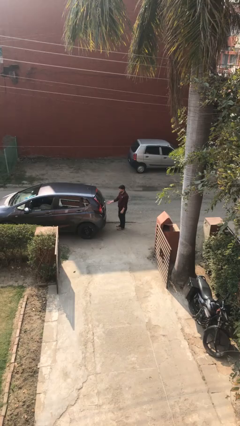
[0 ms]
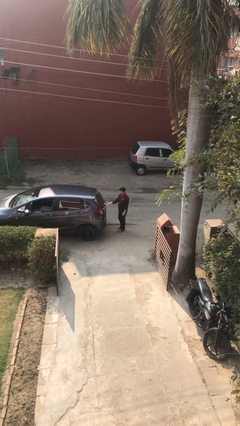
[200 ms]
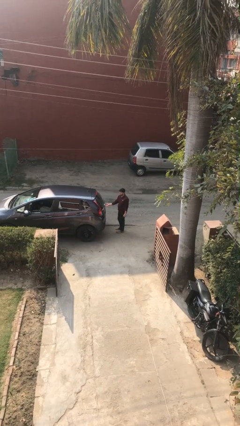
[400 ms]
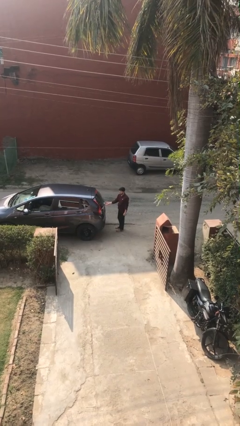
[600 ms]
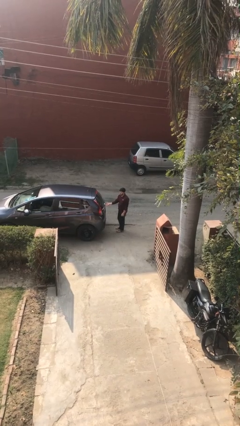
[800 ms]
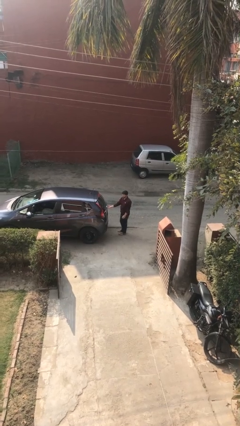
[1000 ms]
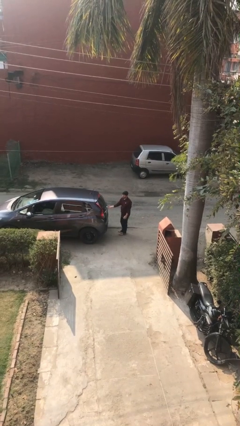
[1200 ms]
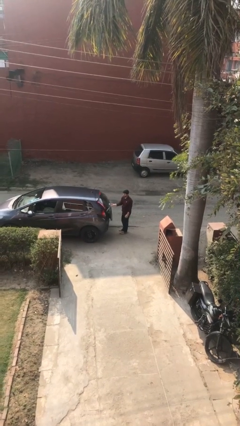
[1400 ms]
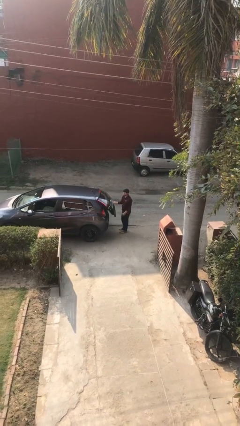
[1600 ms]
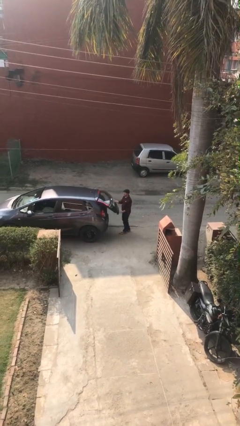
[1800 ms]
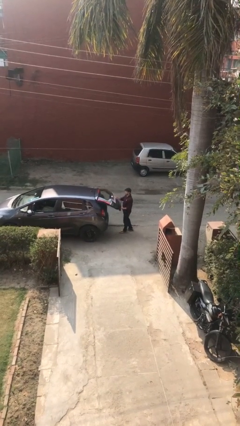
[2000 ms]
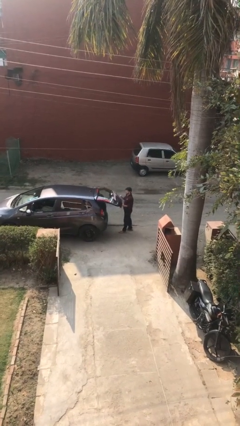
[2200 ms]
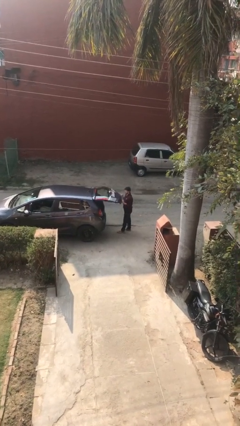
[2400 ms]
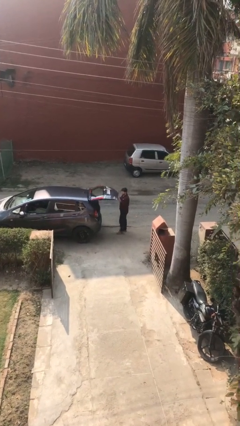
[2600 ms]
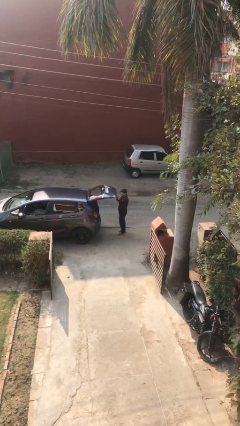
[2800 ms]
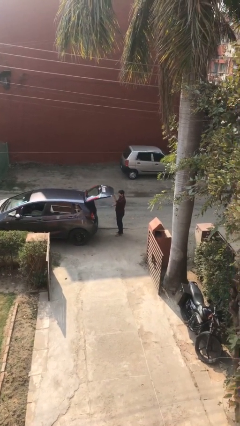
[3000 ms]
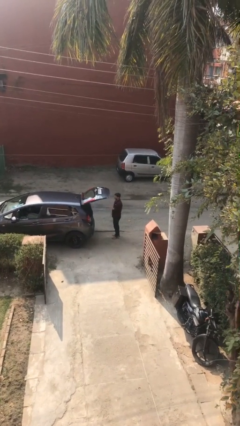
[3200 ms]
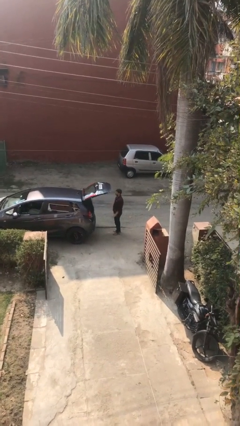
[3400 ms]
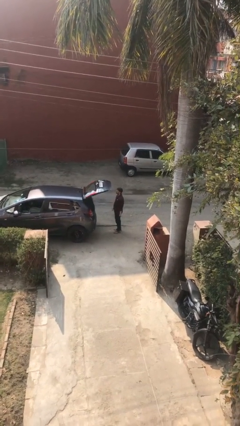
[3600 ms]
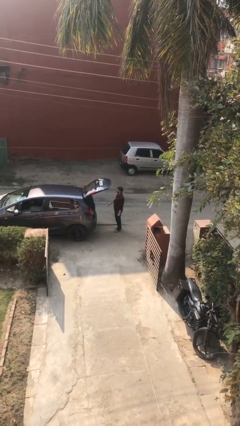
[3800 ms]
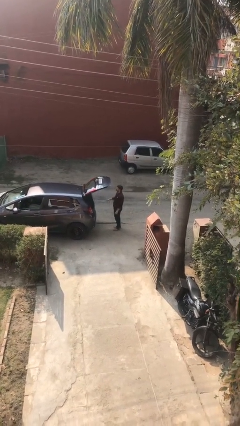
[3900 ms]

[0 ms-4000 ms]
person opens car trunk

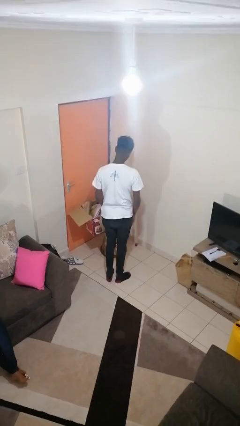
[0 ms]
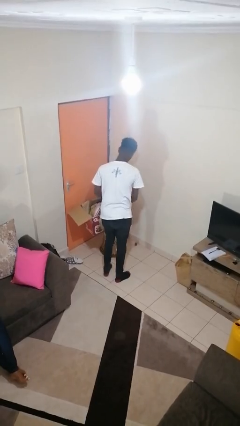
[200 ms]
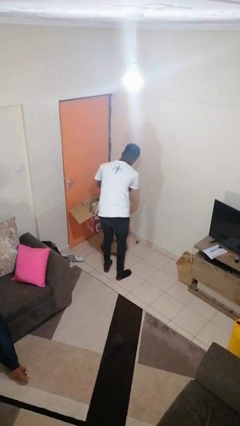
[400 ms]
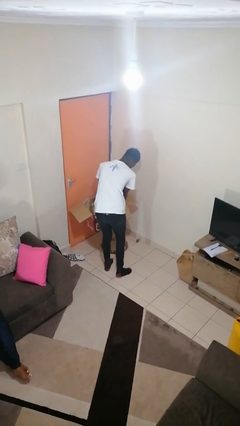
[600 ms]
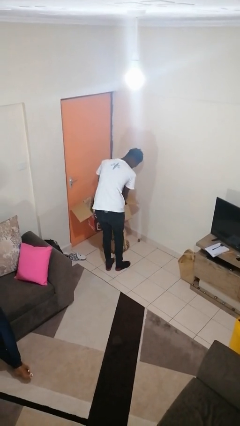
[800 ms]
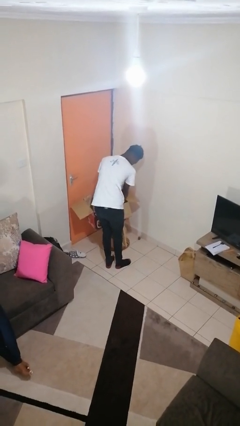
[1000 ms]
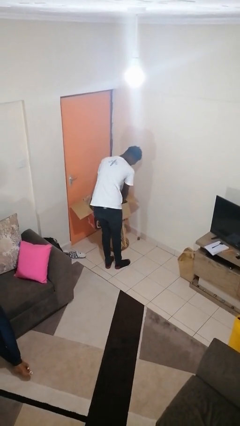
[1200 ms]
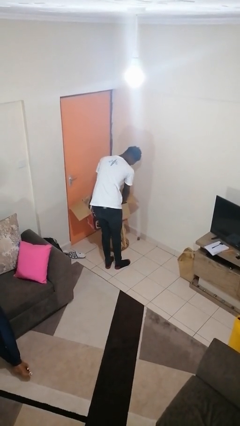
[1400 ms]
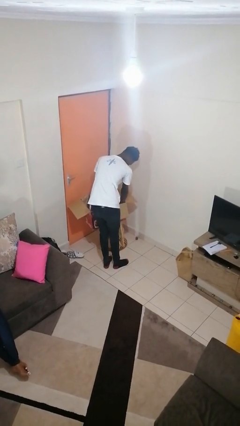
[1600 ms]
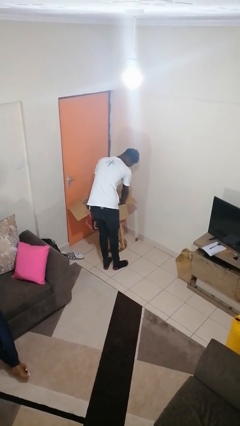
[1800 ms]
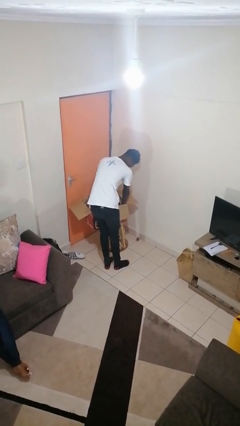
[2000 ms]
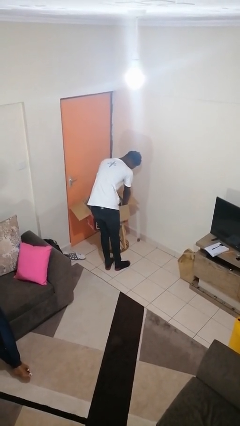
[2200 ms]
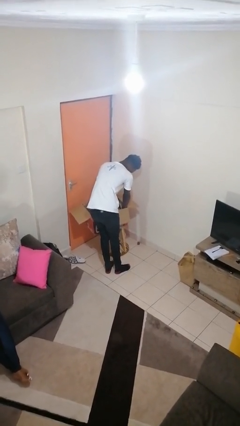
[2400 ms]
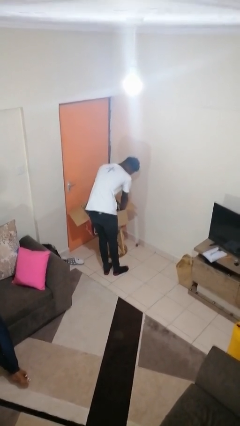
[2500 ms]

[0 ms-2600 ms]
person searches in box

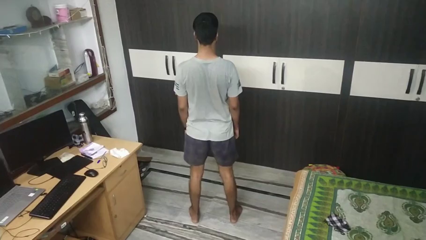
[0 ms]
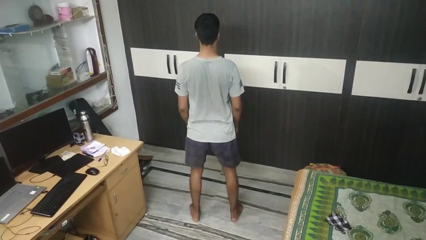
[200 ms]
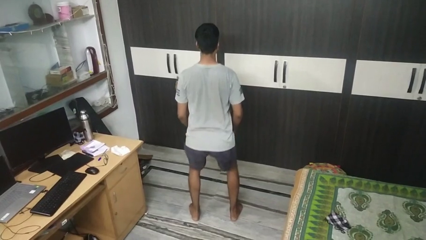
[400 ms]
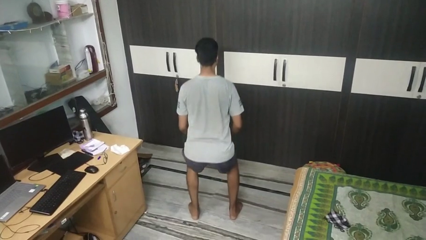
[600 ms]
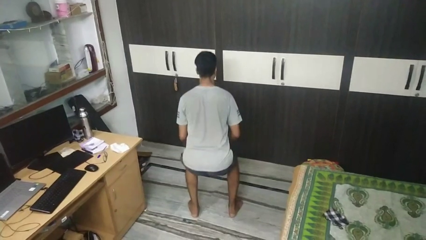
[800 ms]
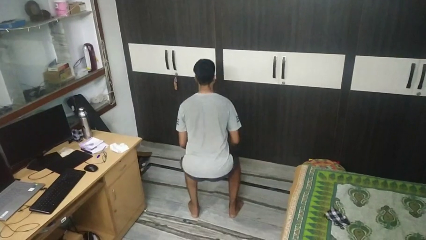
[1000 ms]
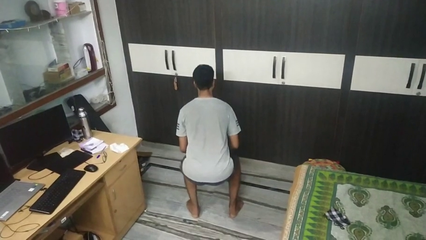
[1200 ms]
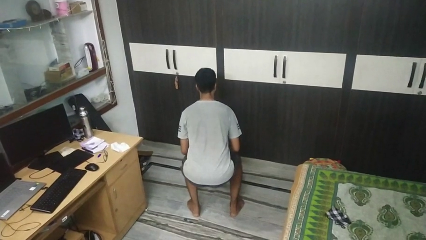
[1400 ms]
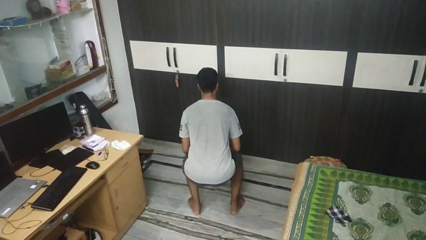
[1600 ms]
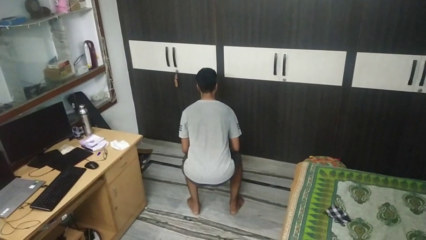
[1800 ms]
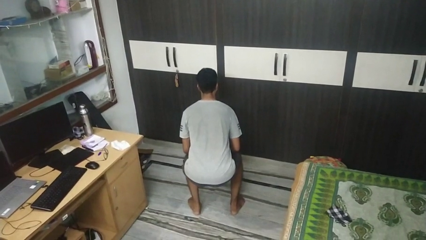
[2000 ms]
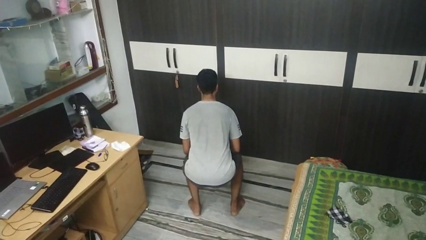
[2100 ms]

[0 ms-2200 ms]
person squats

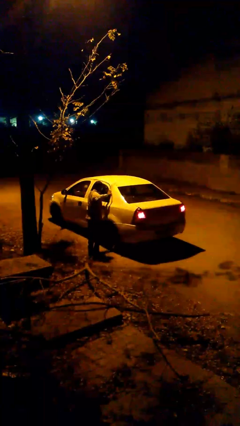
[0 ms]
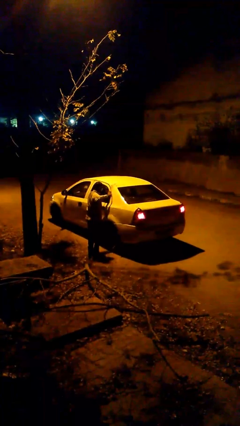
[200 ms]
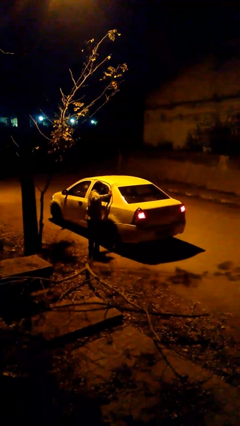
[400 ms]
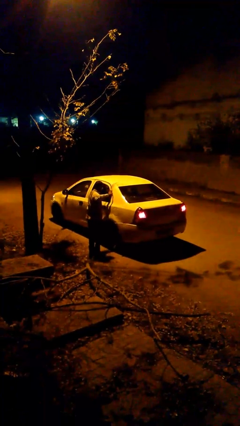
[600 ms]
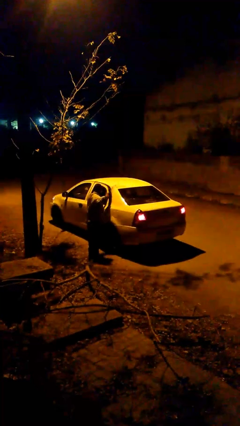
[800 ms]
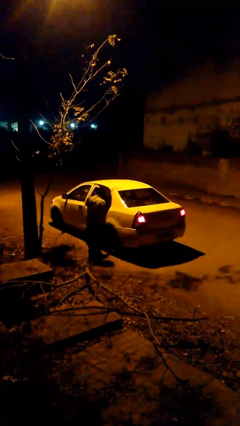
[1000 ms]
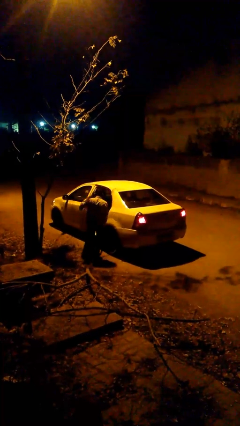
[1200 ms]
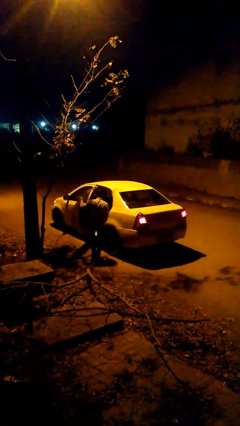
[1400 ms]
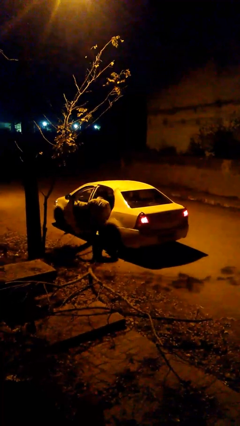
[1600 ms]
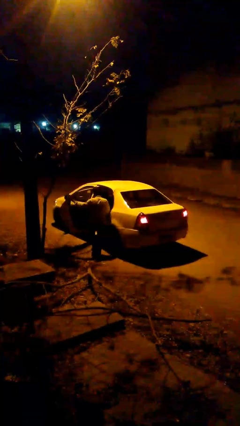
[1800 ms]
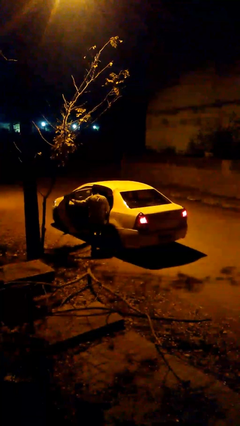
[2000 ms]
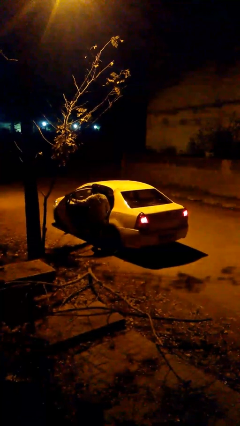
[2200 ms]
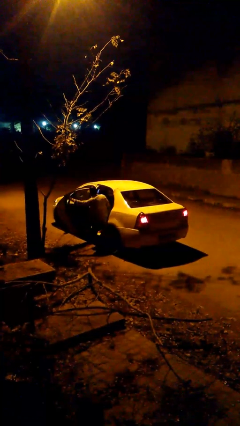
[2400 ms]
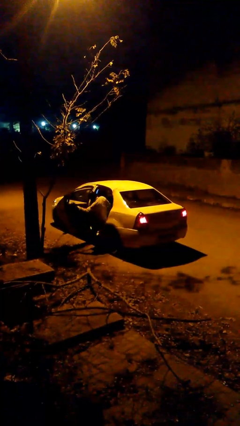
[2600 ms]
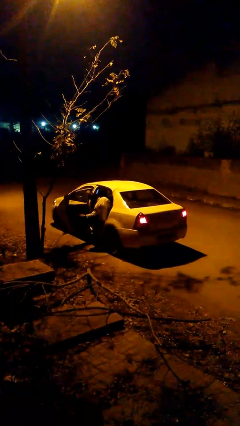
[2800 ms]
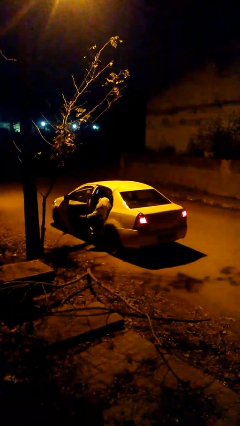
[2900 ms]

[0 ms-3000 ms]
car picks up person

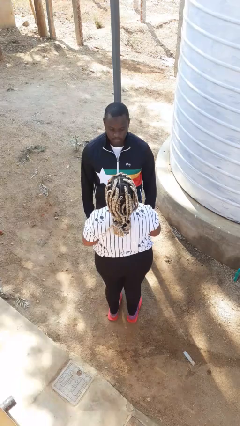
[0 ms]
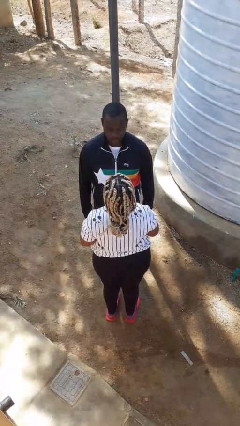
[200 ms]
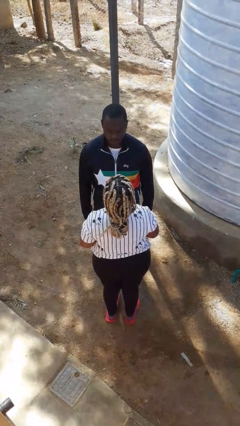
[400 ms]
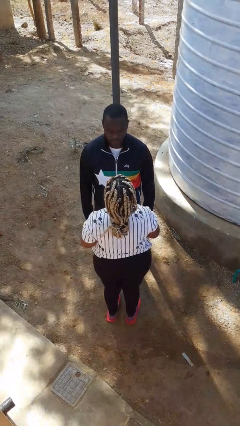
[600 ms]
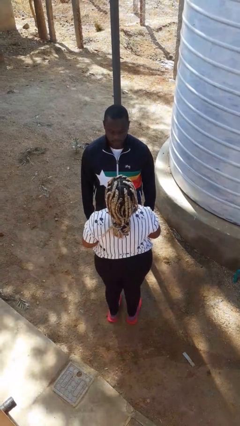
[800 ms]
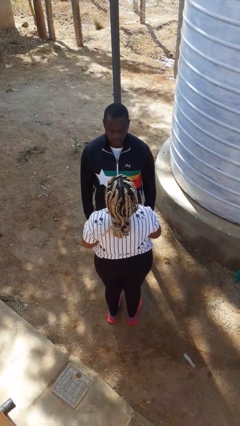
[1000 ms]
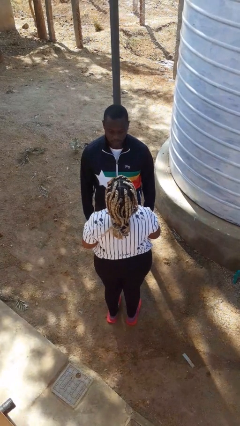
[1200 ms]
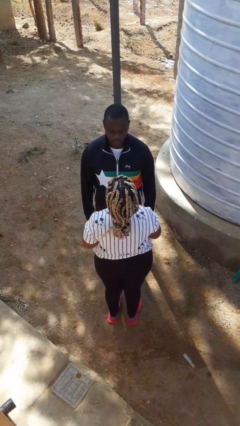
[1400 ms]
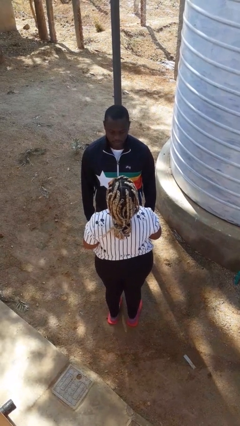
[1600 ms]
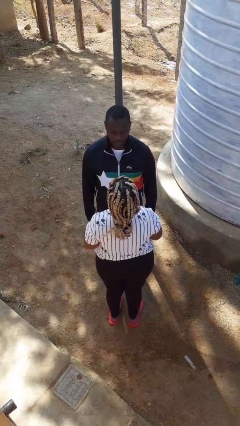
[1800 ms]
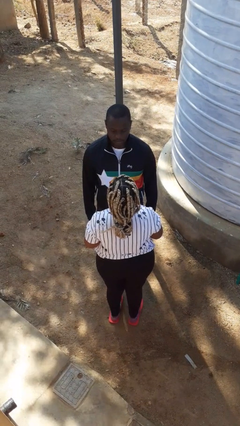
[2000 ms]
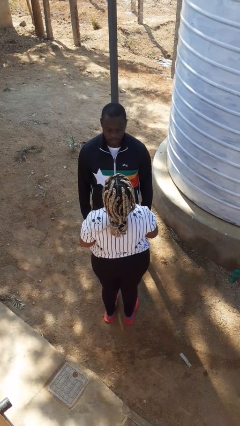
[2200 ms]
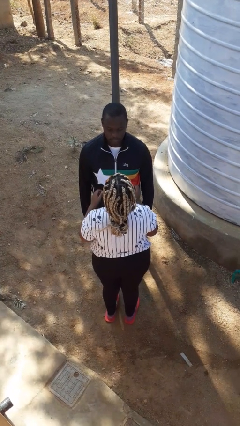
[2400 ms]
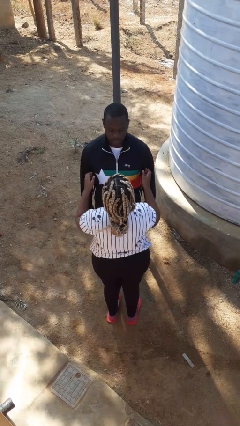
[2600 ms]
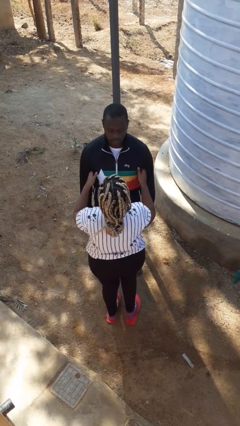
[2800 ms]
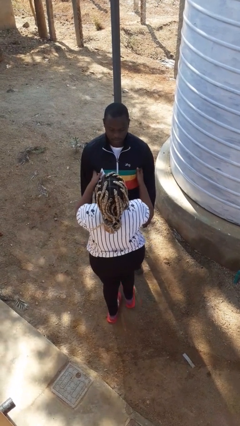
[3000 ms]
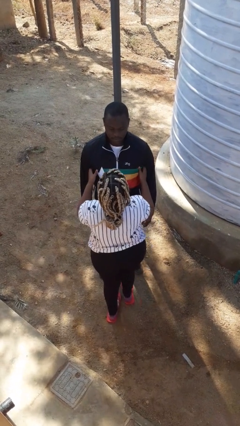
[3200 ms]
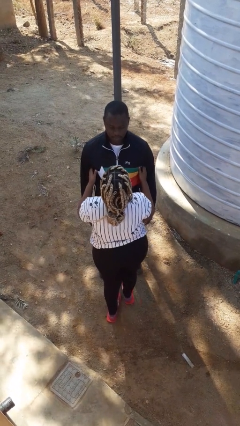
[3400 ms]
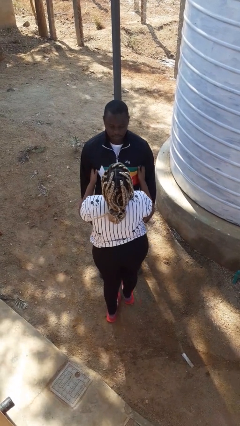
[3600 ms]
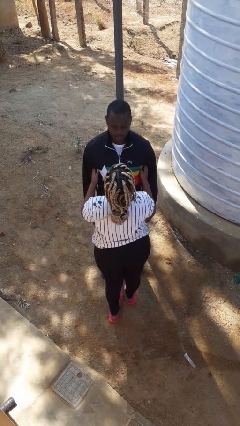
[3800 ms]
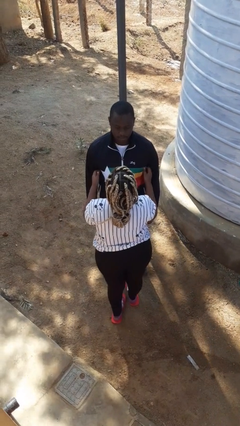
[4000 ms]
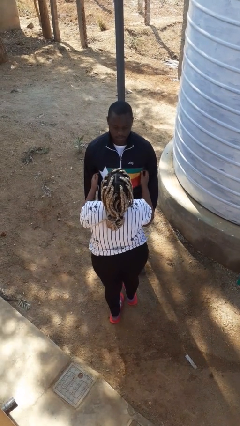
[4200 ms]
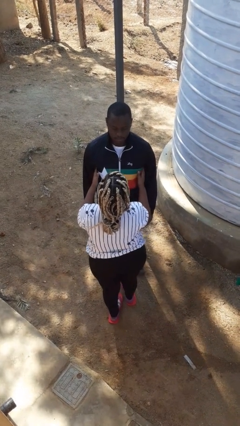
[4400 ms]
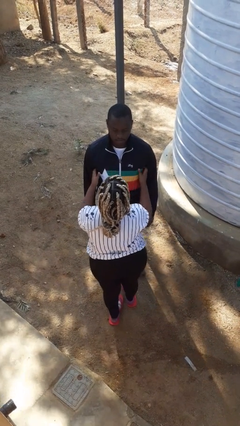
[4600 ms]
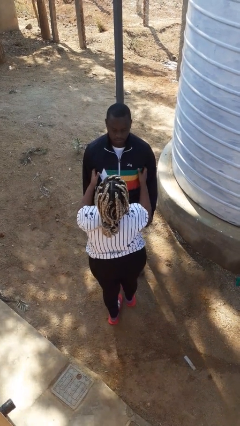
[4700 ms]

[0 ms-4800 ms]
person tickles person

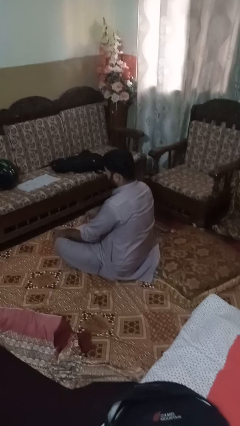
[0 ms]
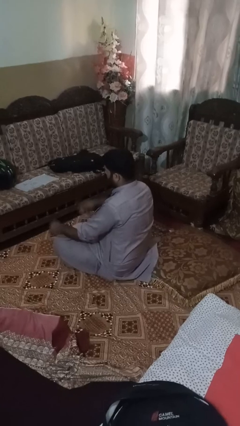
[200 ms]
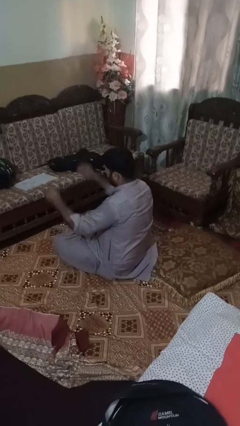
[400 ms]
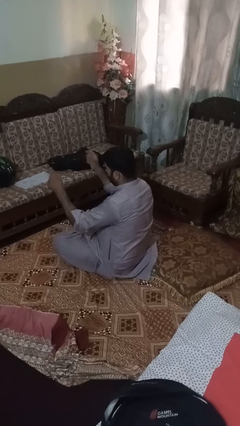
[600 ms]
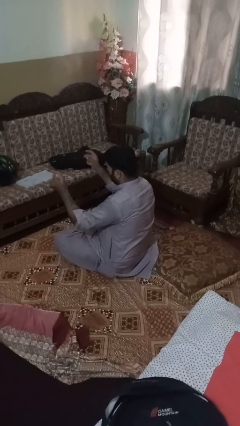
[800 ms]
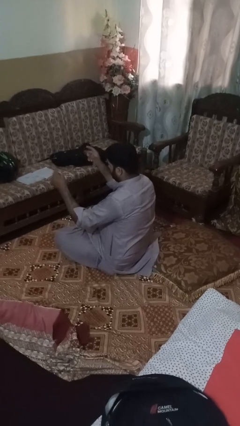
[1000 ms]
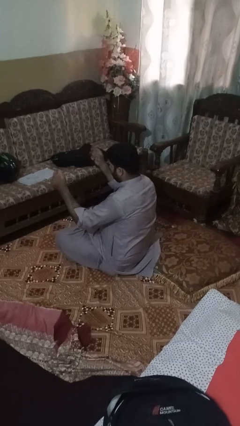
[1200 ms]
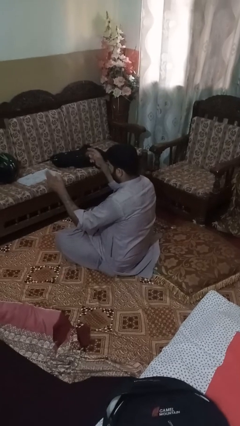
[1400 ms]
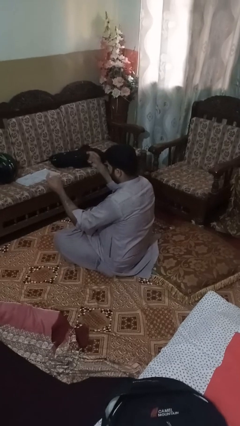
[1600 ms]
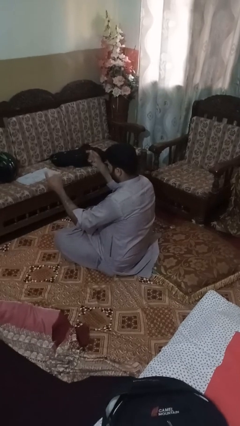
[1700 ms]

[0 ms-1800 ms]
person snaps fingers
